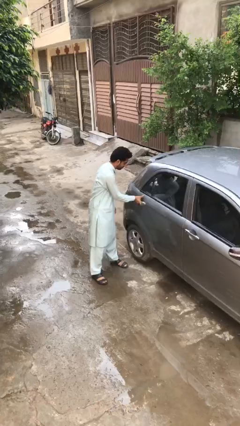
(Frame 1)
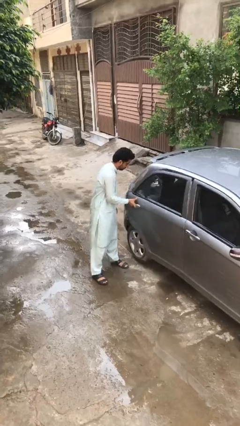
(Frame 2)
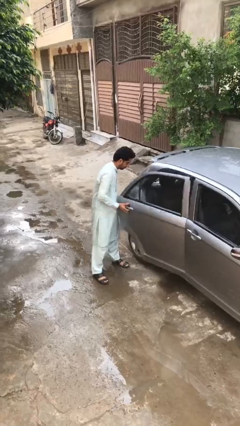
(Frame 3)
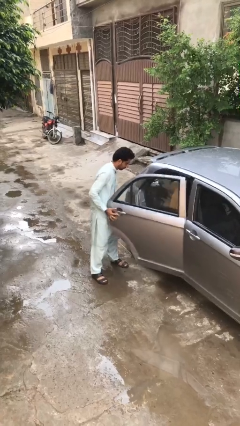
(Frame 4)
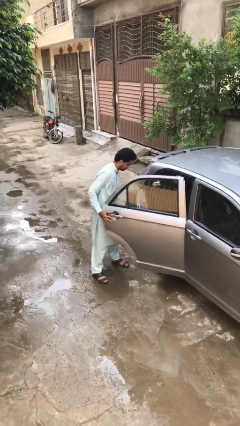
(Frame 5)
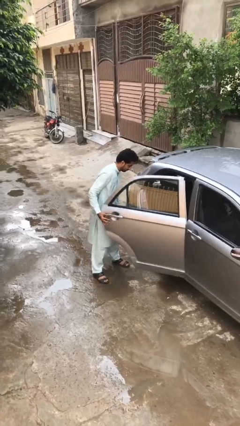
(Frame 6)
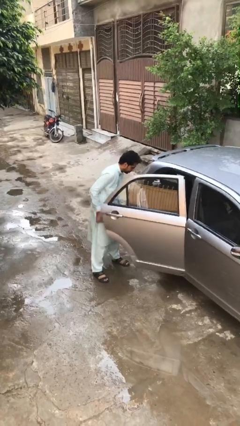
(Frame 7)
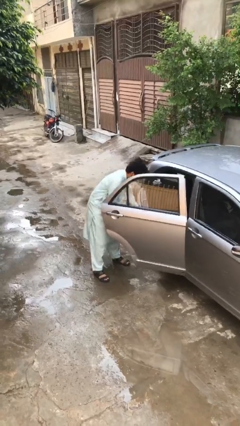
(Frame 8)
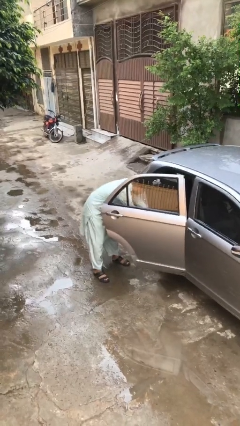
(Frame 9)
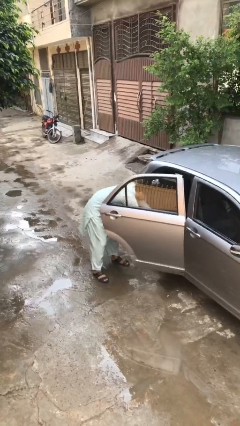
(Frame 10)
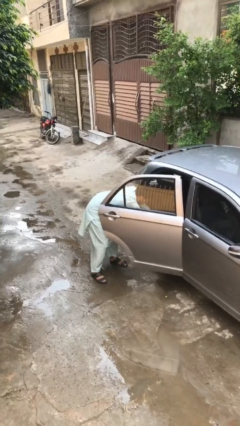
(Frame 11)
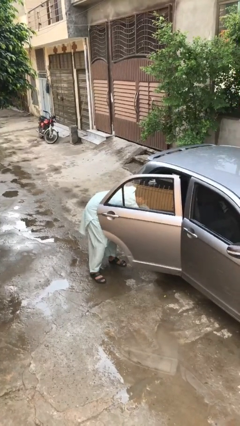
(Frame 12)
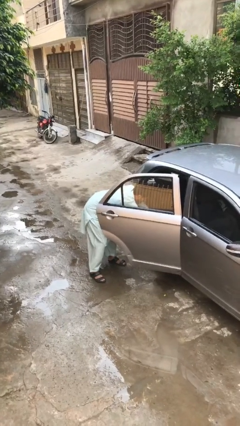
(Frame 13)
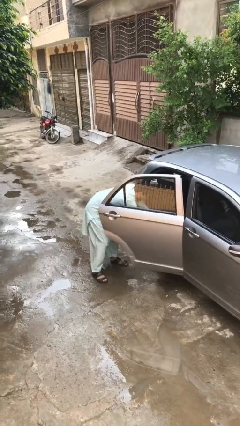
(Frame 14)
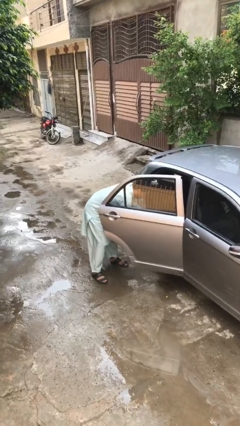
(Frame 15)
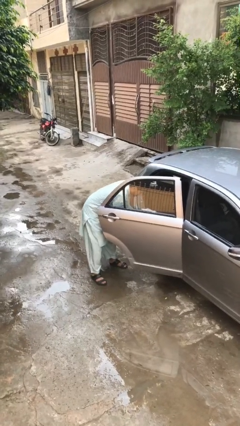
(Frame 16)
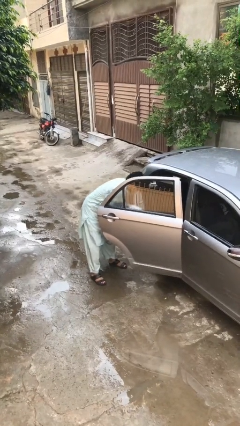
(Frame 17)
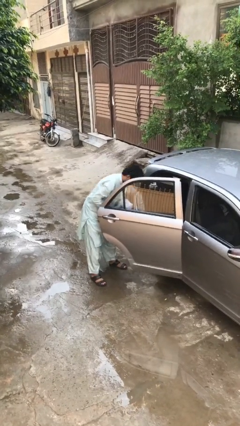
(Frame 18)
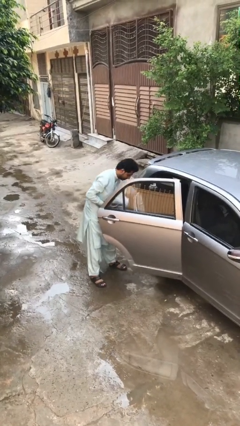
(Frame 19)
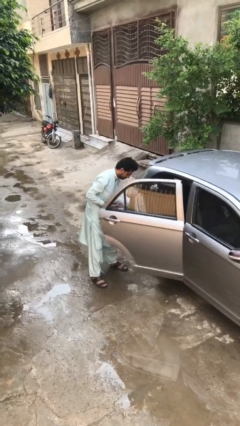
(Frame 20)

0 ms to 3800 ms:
person unloads car

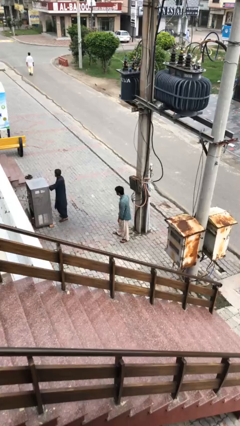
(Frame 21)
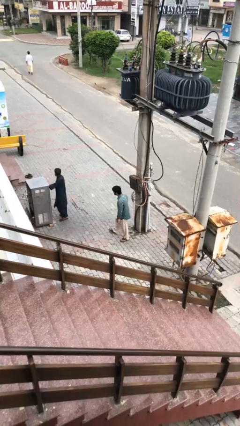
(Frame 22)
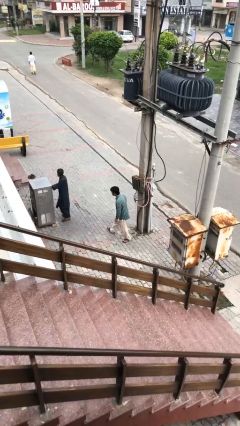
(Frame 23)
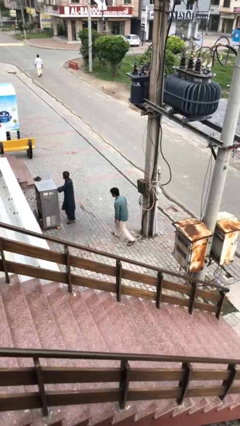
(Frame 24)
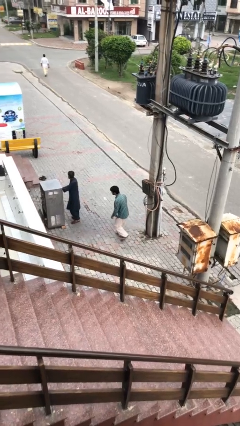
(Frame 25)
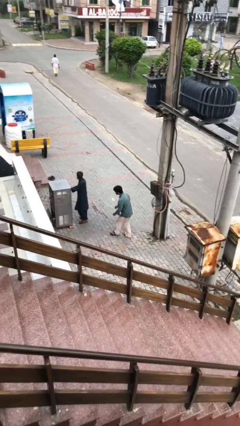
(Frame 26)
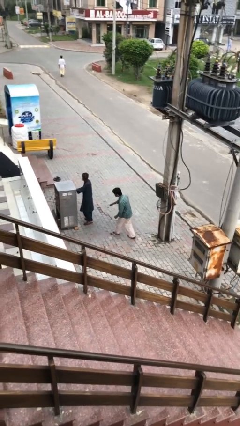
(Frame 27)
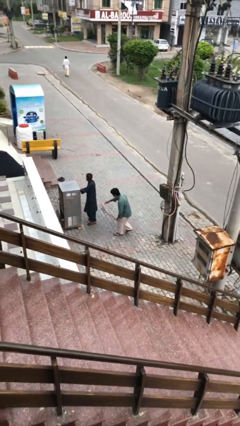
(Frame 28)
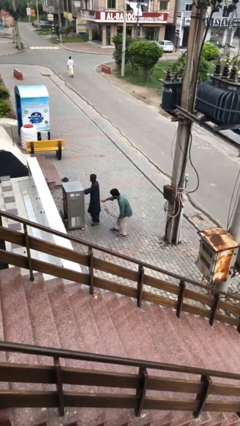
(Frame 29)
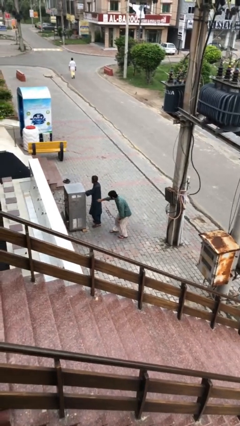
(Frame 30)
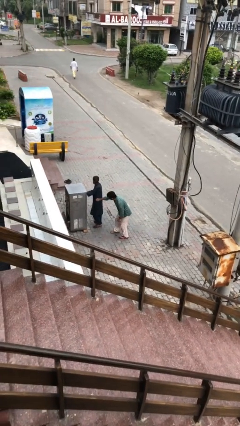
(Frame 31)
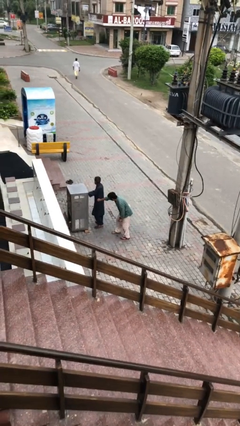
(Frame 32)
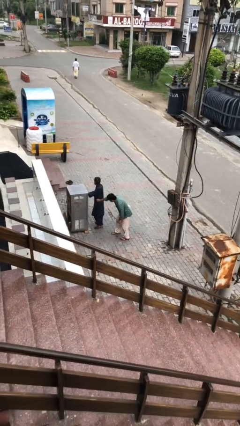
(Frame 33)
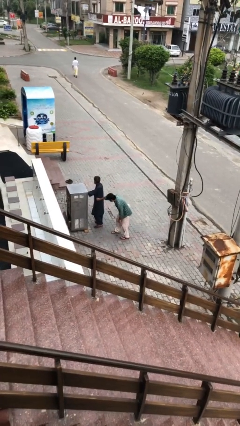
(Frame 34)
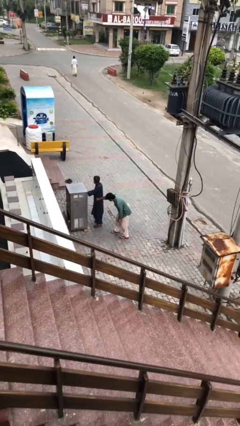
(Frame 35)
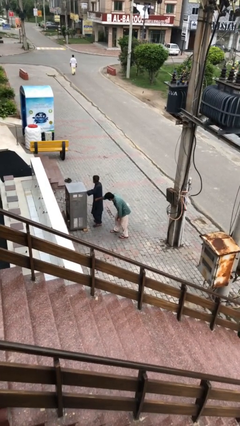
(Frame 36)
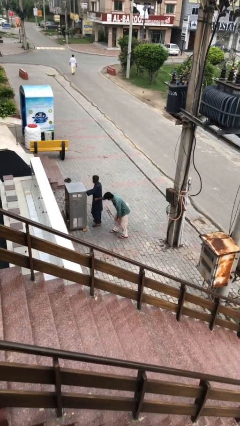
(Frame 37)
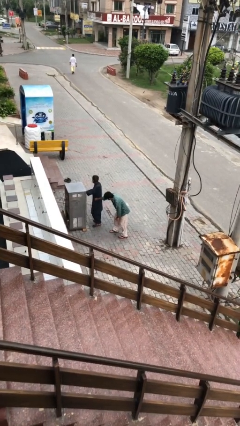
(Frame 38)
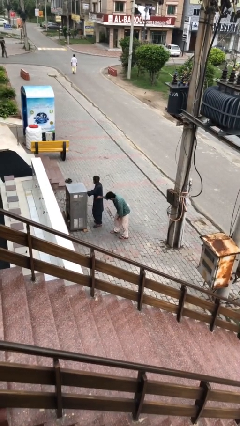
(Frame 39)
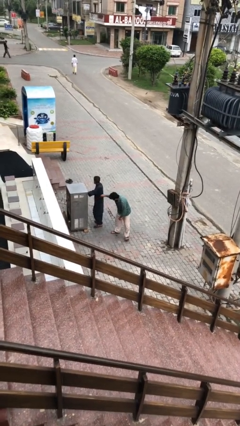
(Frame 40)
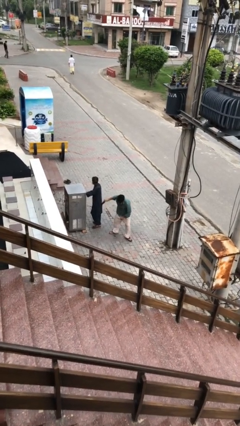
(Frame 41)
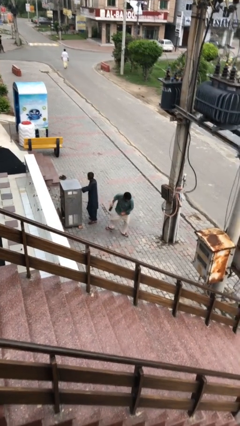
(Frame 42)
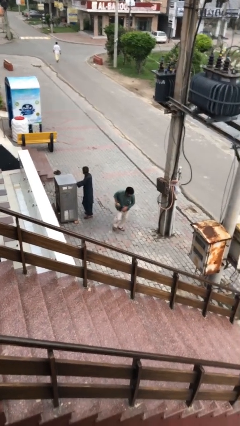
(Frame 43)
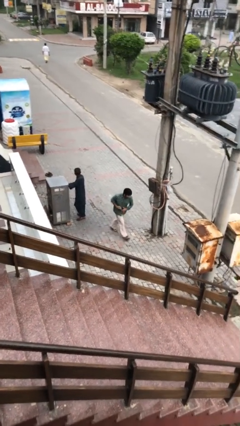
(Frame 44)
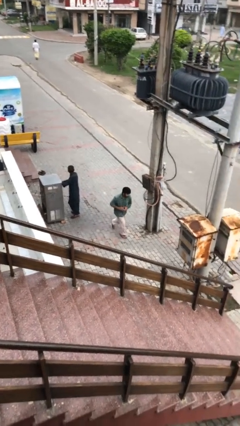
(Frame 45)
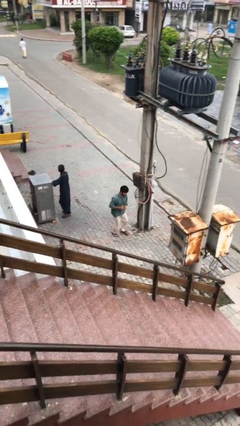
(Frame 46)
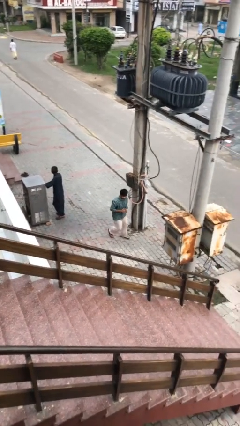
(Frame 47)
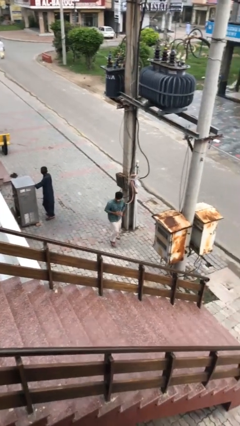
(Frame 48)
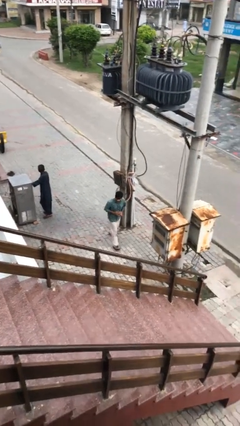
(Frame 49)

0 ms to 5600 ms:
person steals object from person

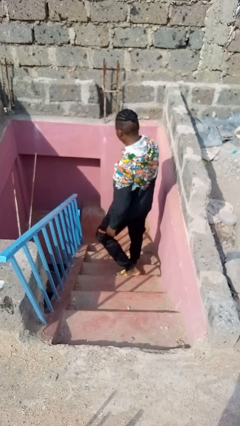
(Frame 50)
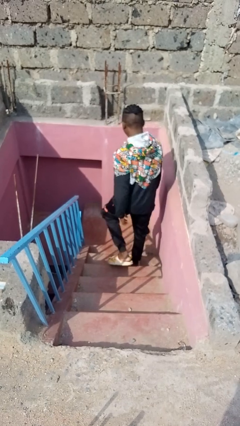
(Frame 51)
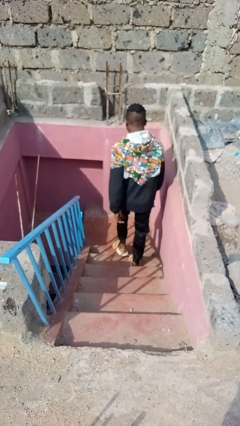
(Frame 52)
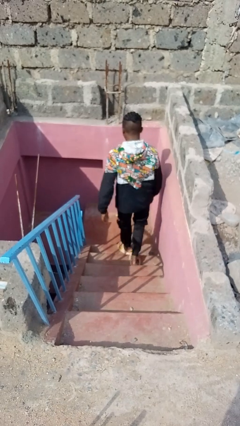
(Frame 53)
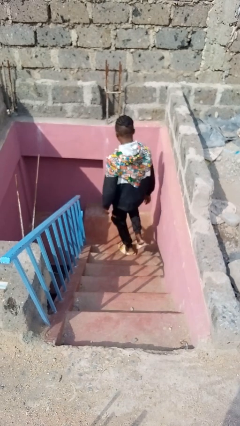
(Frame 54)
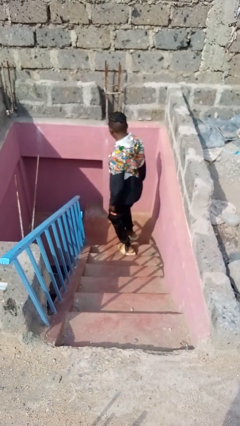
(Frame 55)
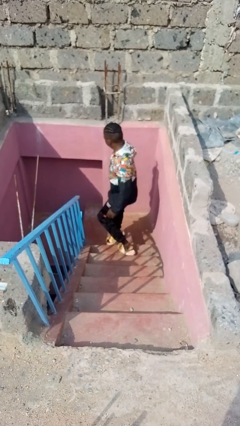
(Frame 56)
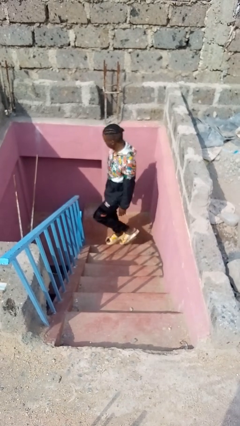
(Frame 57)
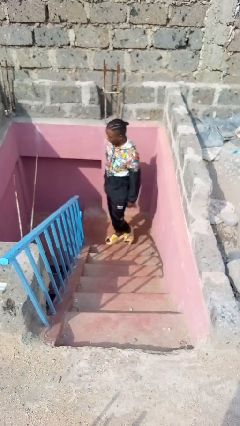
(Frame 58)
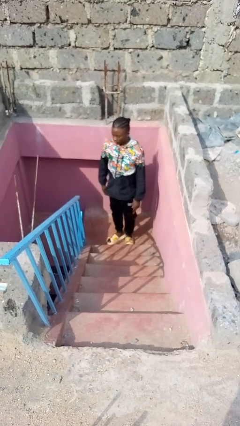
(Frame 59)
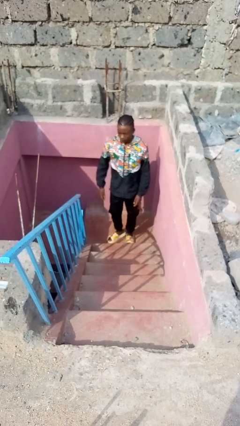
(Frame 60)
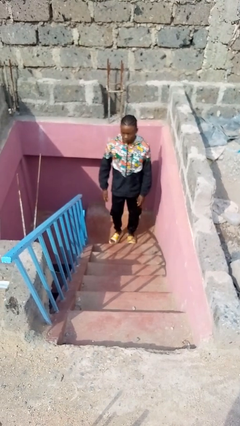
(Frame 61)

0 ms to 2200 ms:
person climbs down stairs

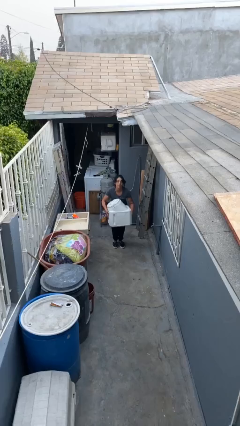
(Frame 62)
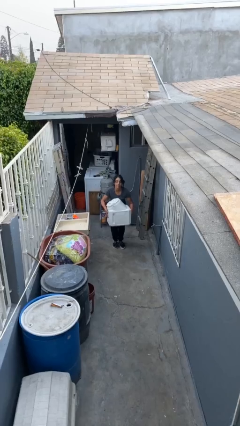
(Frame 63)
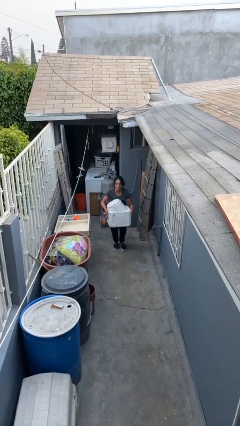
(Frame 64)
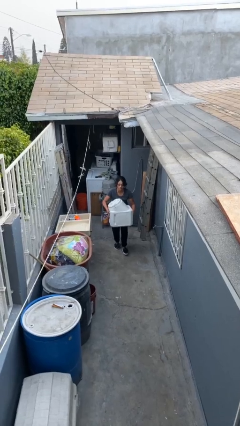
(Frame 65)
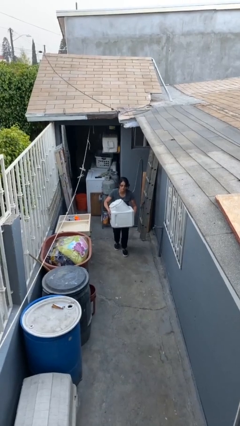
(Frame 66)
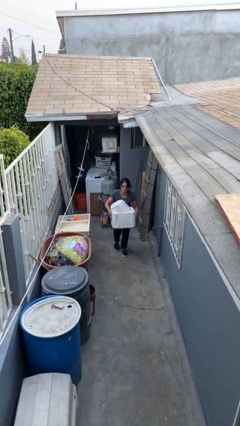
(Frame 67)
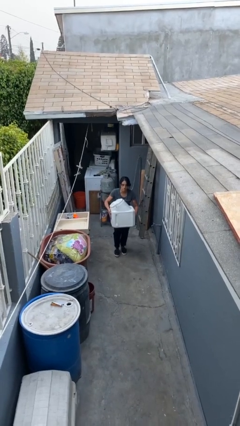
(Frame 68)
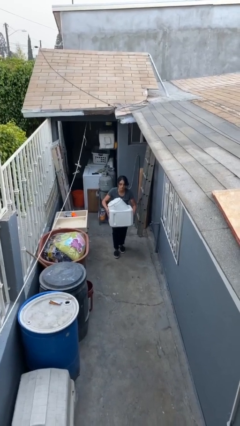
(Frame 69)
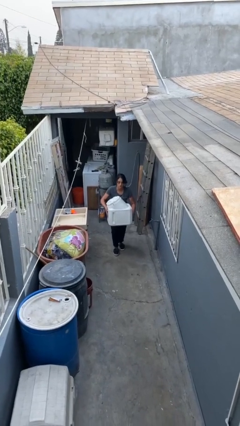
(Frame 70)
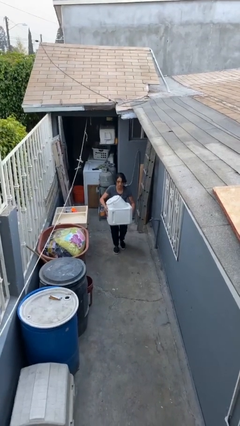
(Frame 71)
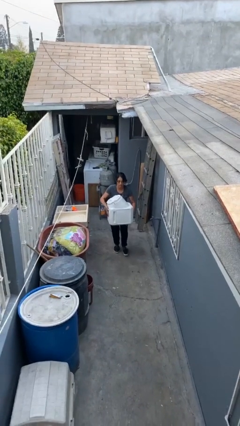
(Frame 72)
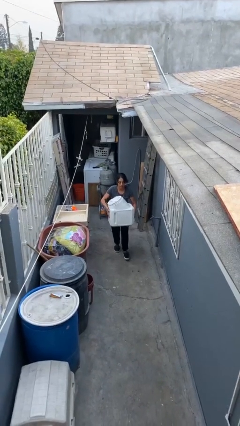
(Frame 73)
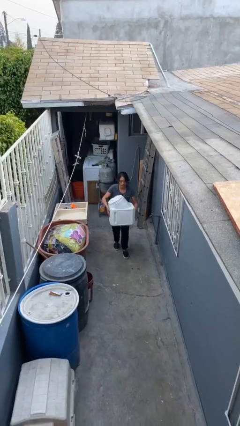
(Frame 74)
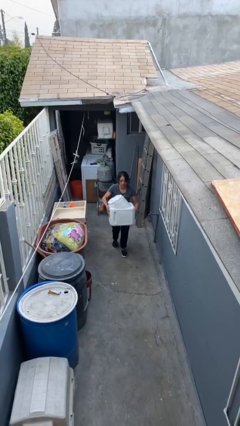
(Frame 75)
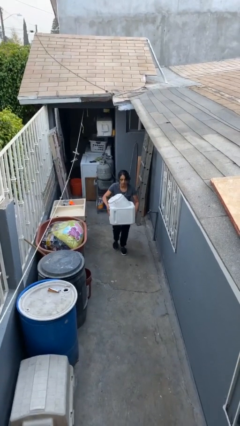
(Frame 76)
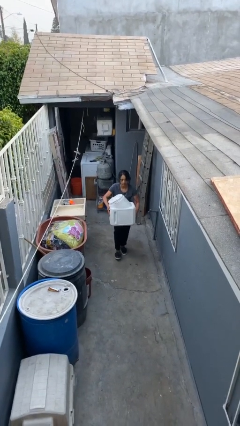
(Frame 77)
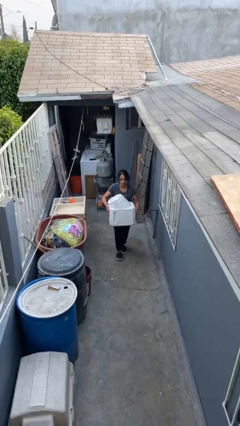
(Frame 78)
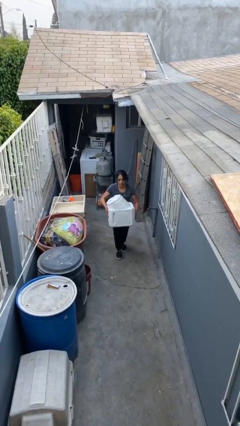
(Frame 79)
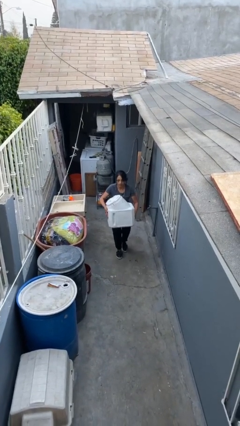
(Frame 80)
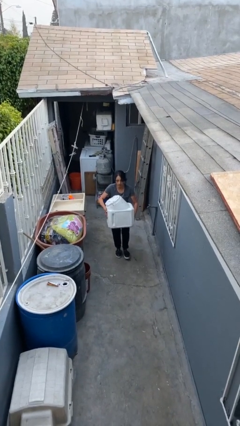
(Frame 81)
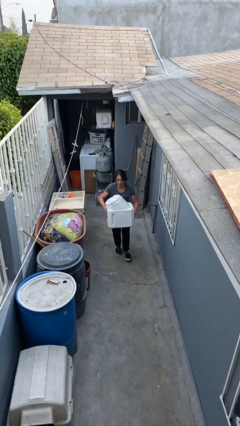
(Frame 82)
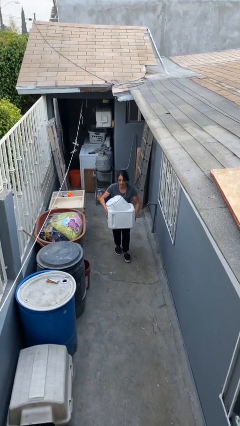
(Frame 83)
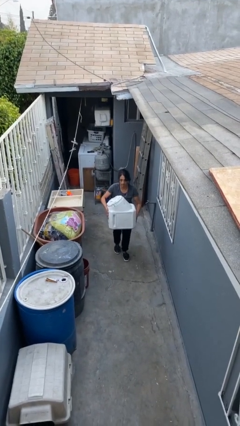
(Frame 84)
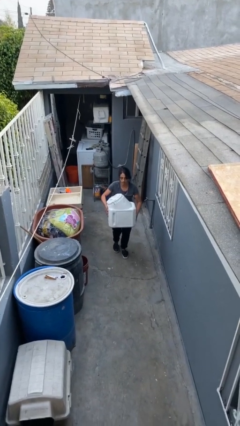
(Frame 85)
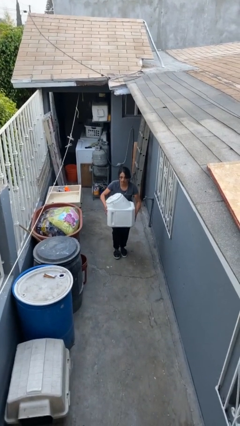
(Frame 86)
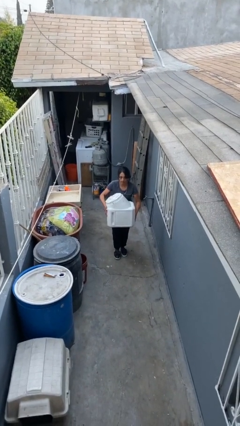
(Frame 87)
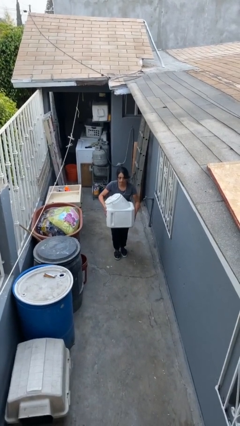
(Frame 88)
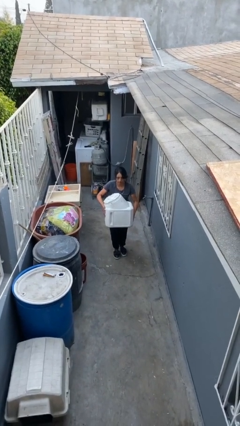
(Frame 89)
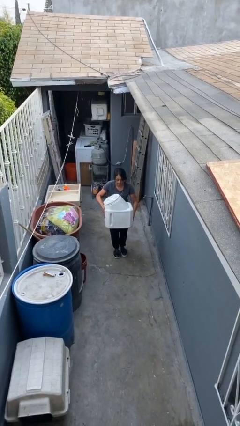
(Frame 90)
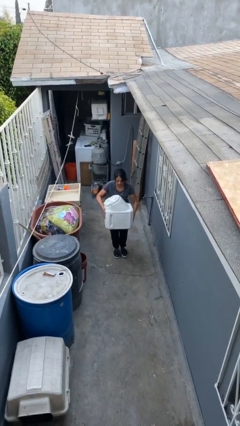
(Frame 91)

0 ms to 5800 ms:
person carries heavy object
